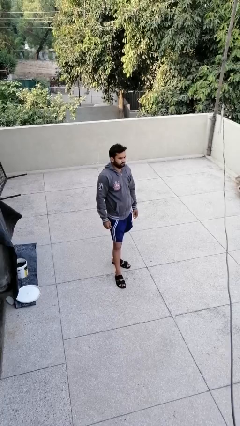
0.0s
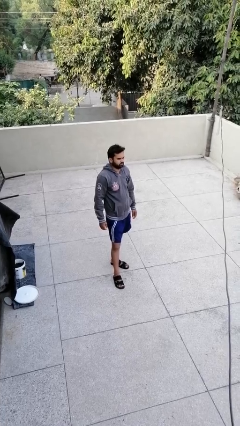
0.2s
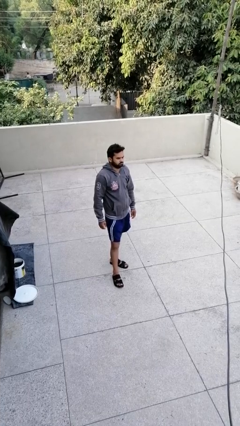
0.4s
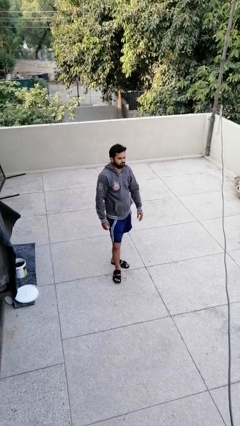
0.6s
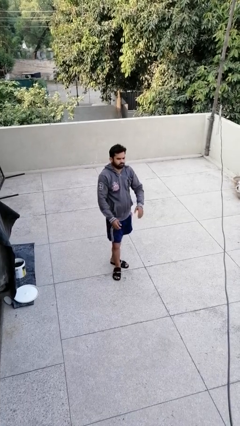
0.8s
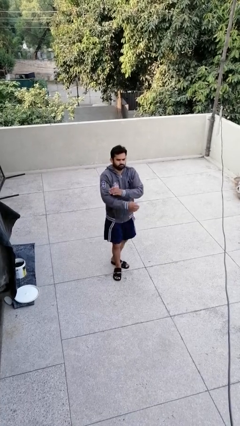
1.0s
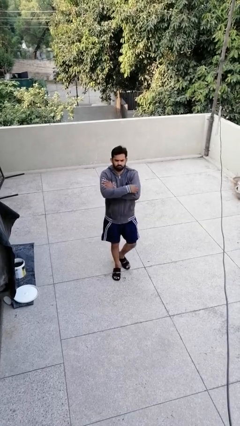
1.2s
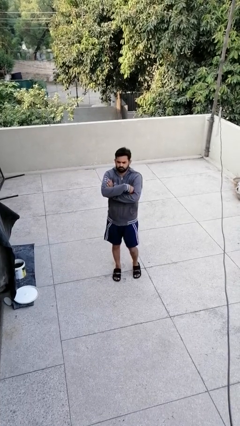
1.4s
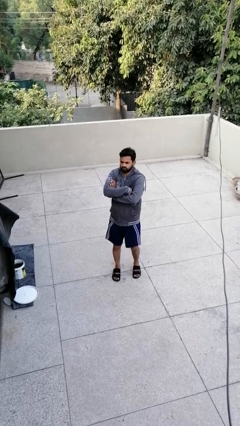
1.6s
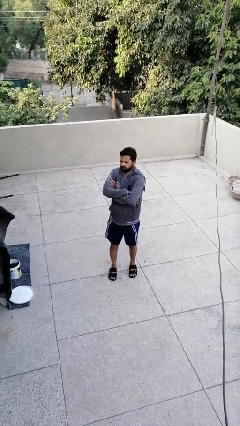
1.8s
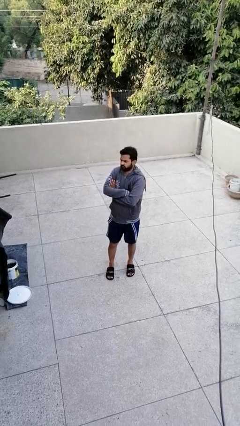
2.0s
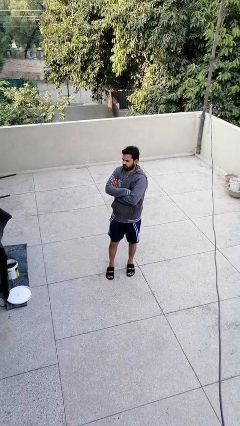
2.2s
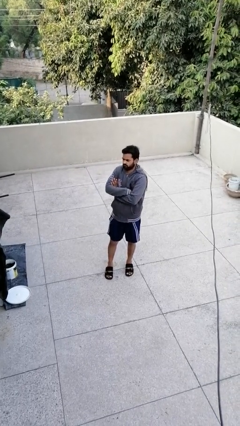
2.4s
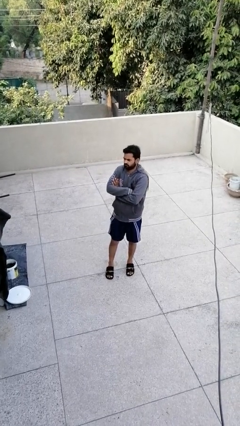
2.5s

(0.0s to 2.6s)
person crosses arms

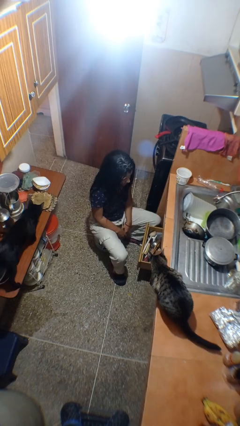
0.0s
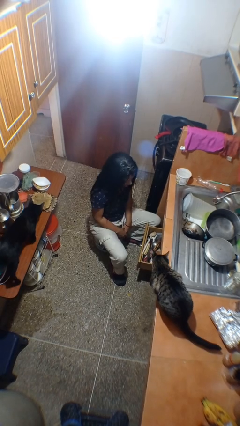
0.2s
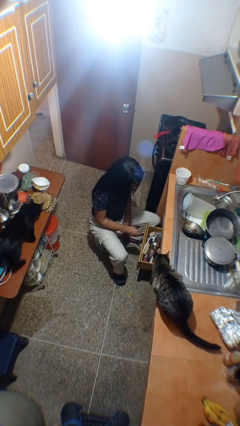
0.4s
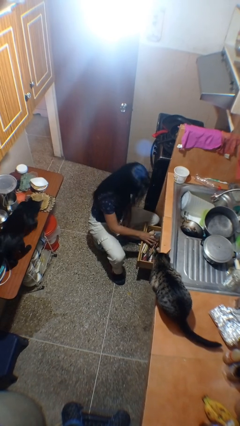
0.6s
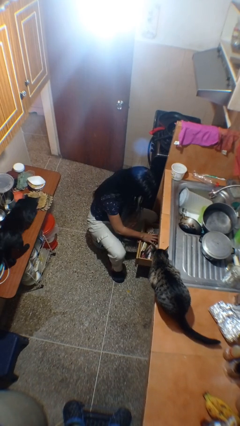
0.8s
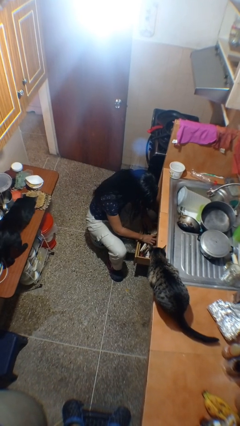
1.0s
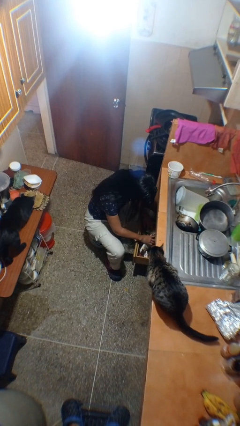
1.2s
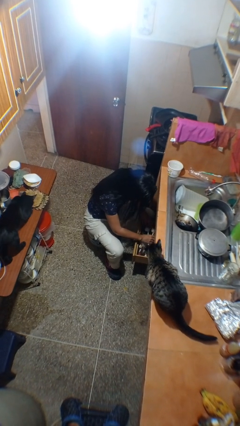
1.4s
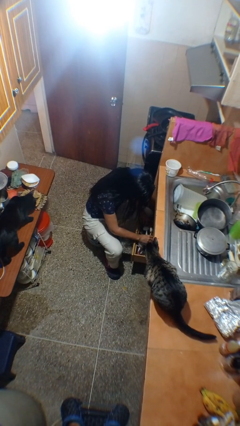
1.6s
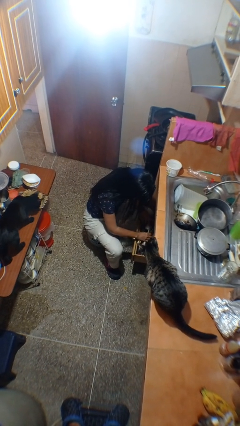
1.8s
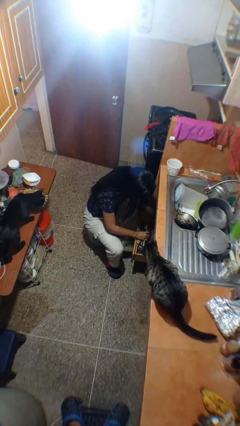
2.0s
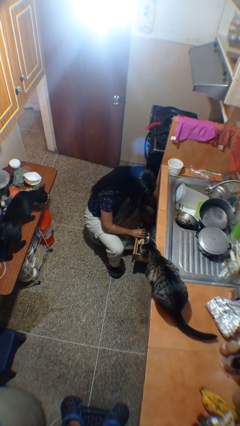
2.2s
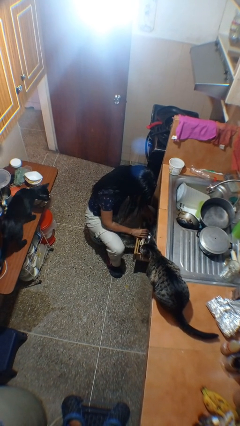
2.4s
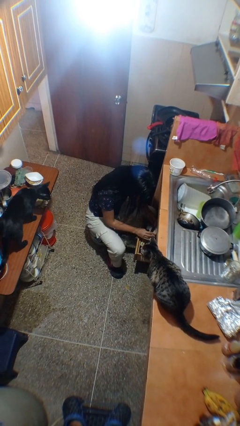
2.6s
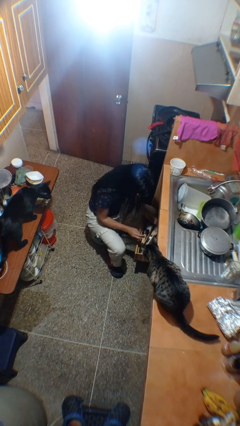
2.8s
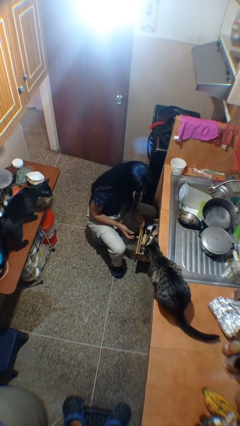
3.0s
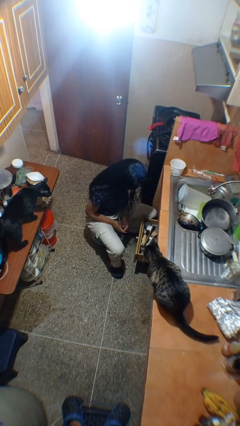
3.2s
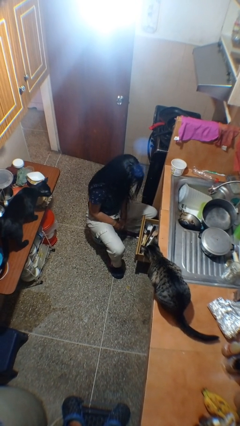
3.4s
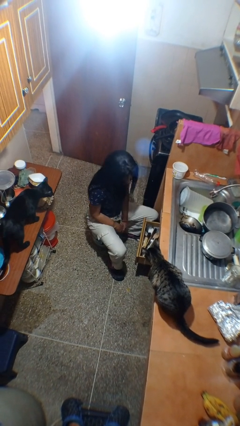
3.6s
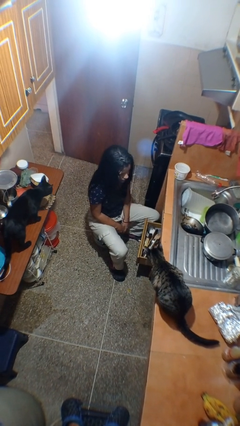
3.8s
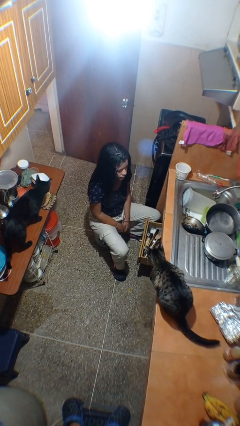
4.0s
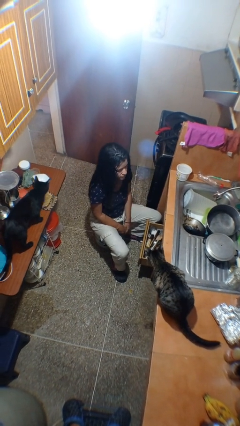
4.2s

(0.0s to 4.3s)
person searches in kitchen drawer

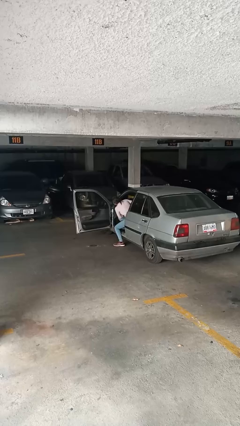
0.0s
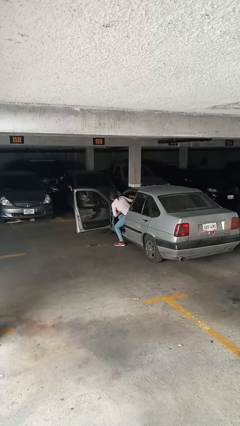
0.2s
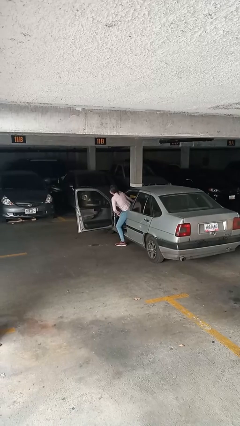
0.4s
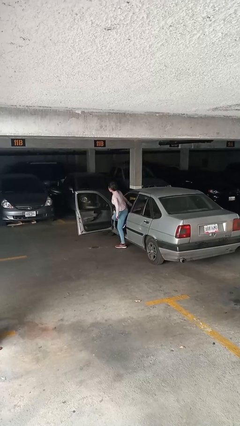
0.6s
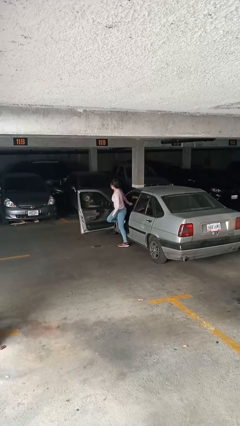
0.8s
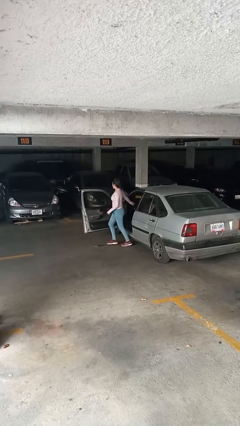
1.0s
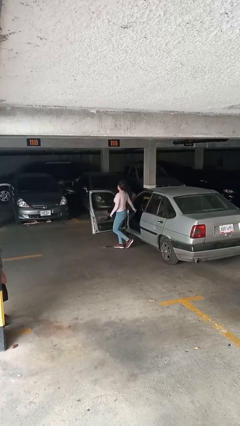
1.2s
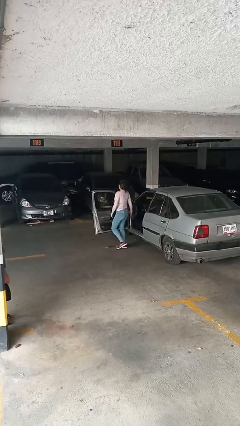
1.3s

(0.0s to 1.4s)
person exits car

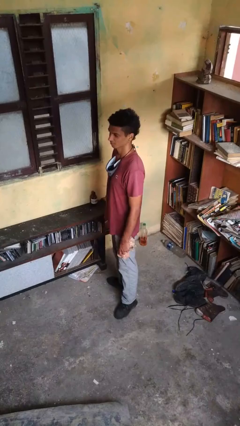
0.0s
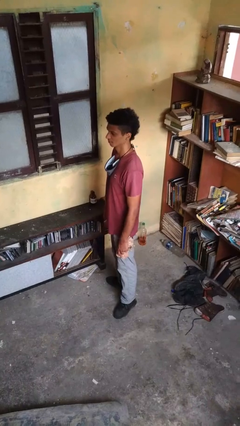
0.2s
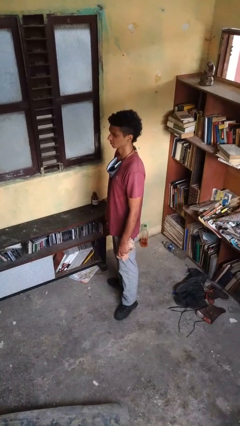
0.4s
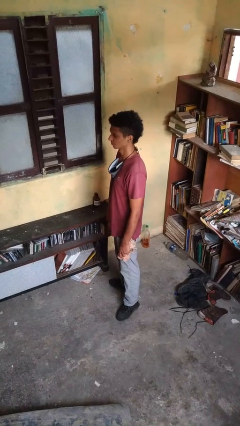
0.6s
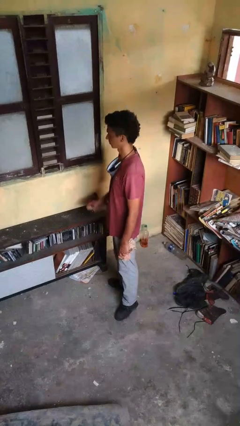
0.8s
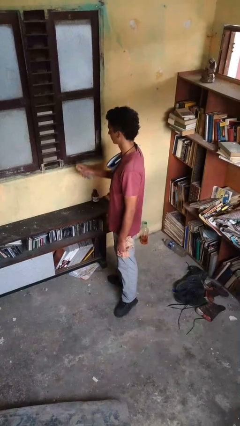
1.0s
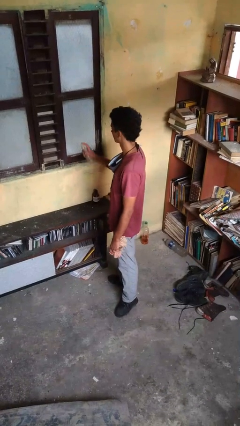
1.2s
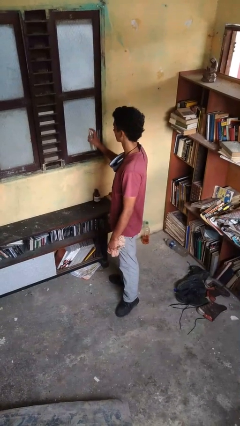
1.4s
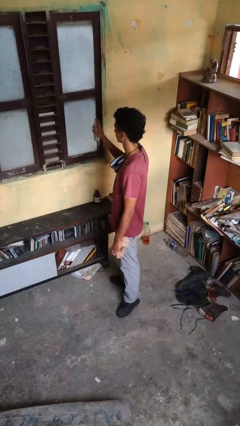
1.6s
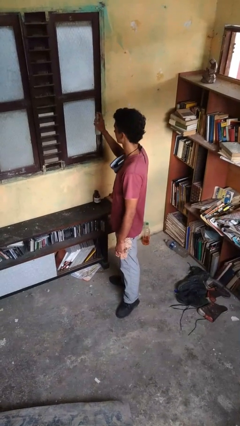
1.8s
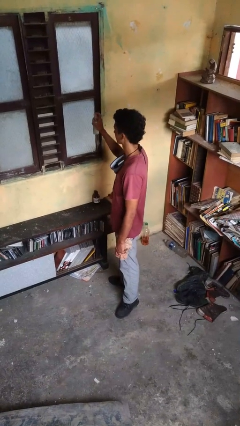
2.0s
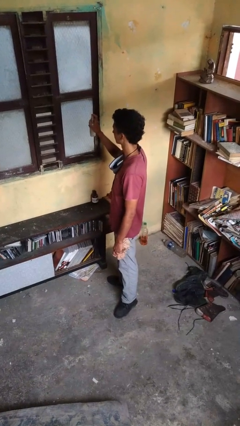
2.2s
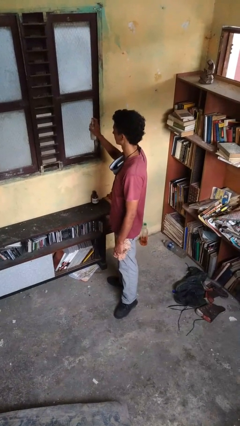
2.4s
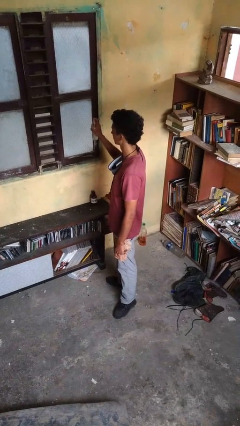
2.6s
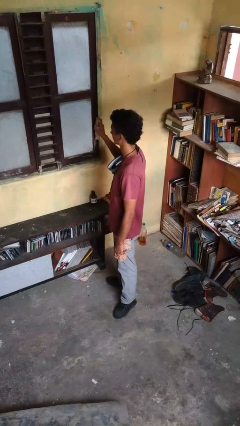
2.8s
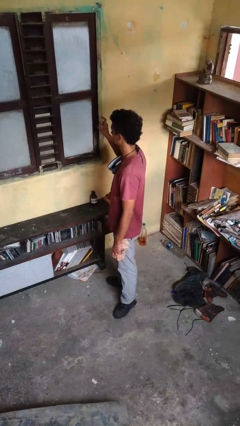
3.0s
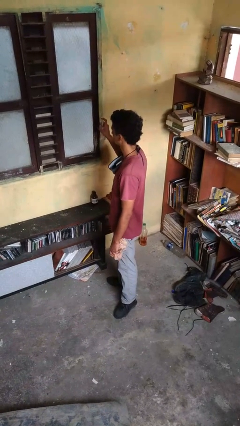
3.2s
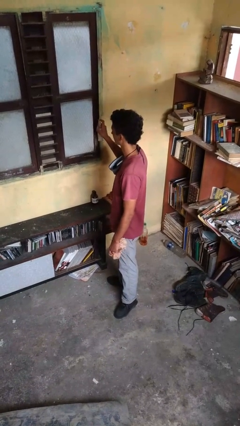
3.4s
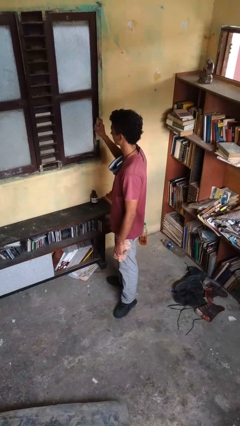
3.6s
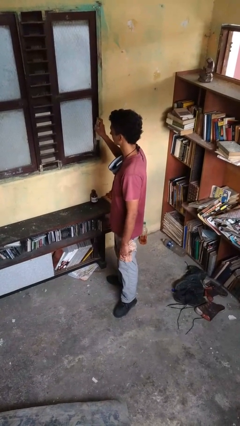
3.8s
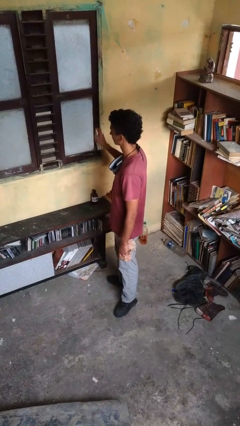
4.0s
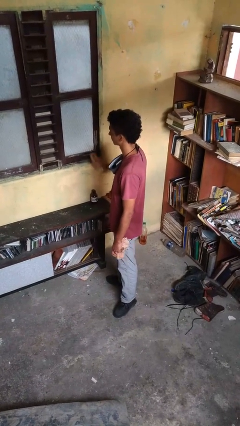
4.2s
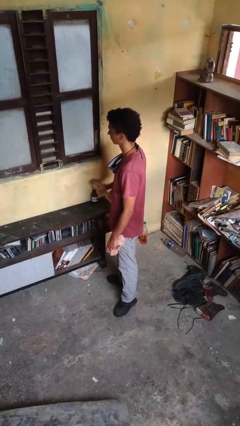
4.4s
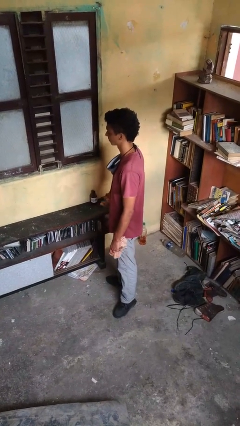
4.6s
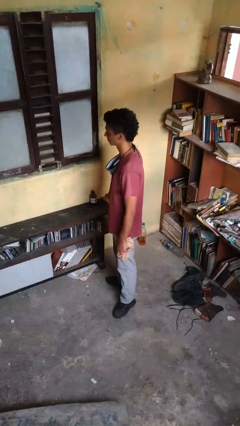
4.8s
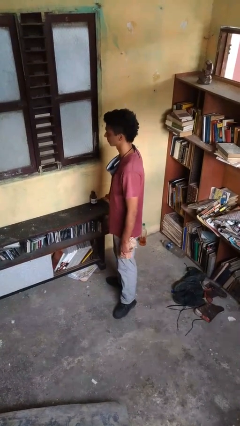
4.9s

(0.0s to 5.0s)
person sprays from bottle

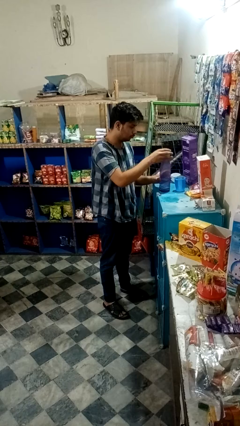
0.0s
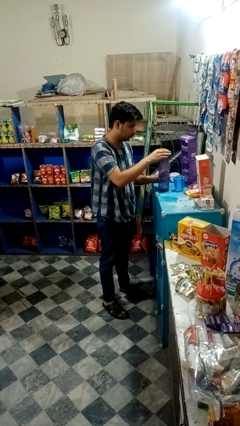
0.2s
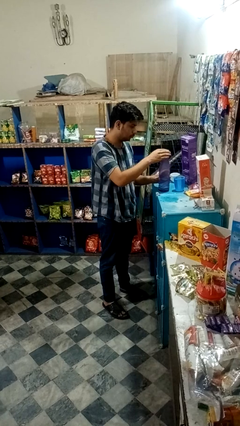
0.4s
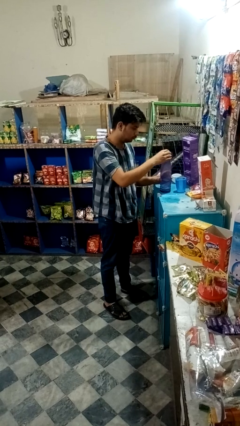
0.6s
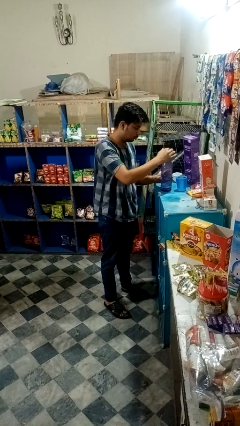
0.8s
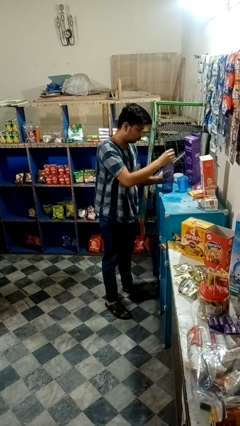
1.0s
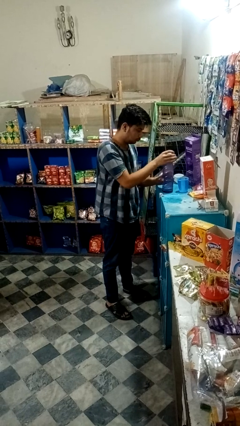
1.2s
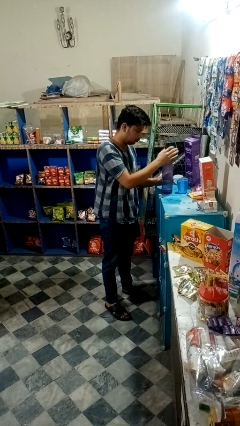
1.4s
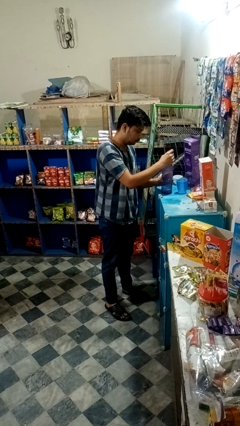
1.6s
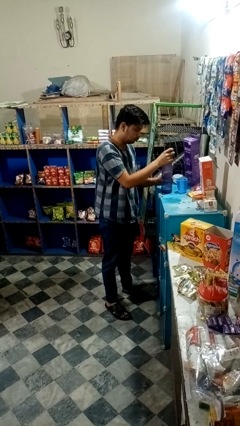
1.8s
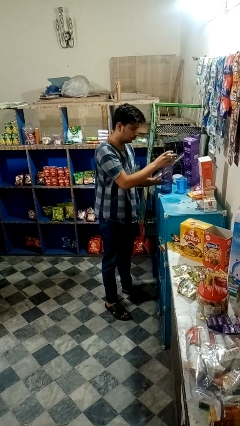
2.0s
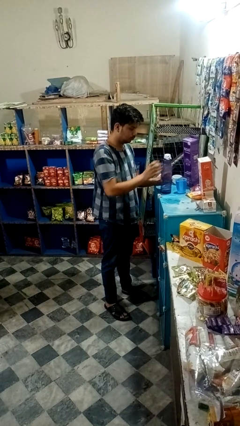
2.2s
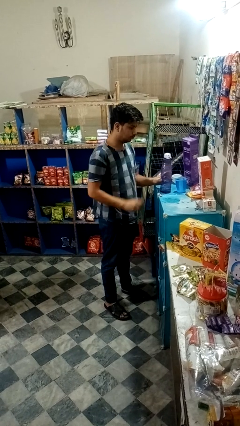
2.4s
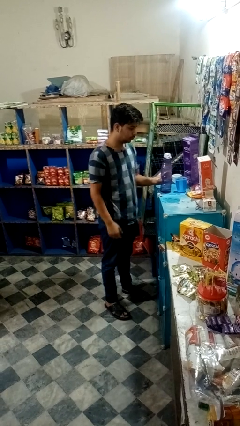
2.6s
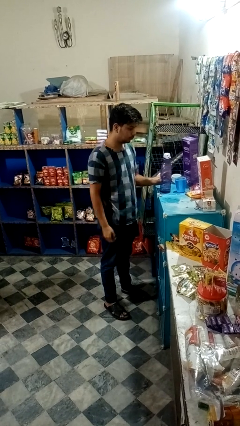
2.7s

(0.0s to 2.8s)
person screws lid to bottle

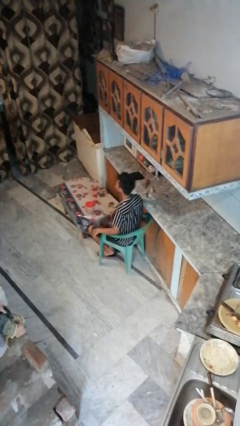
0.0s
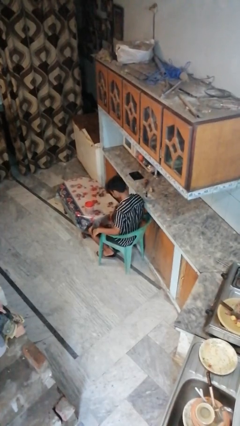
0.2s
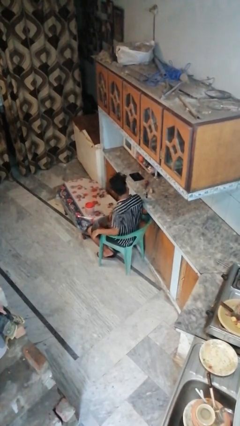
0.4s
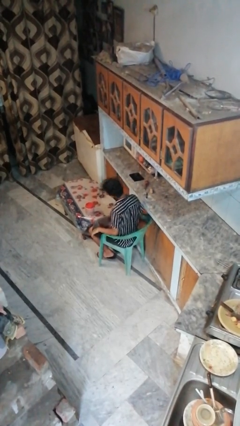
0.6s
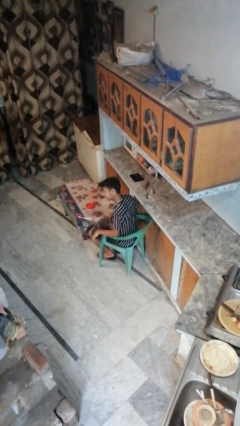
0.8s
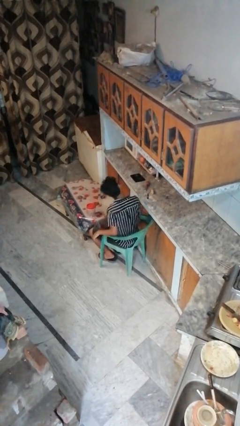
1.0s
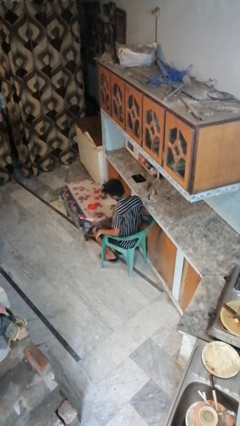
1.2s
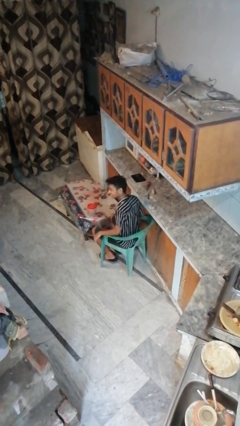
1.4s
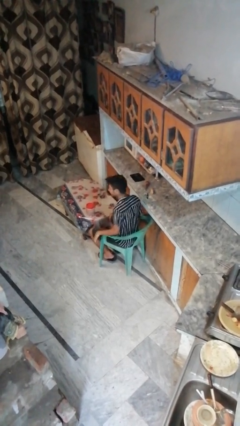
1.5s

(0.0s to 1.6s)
person shakes head
